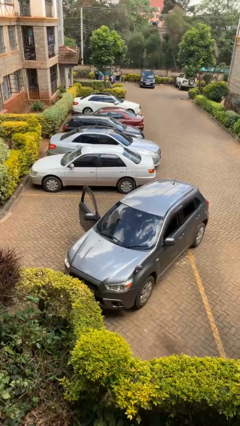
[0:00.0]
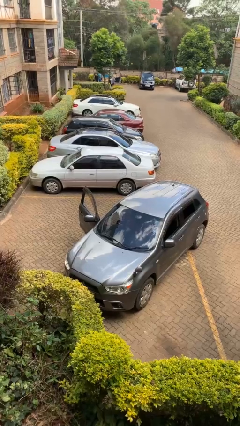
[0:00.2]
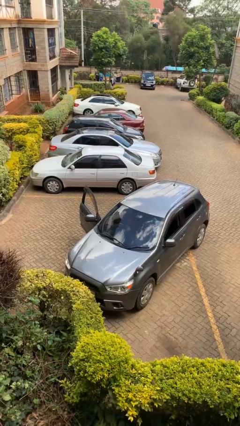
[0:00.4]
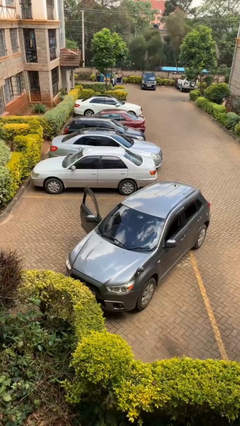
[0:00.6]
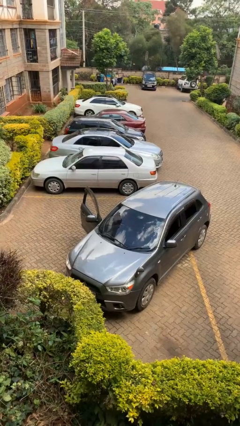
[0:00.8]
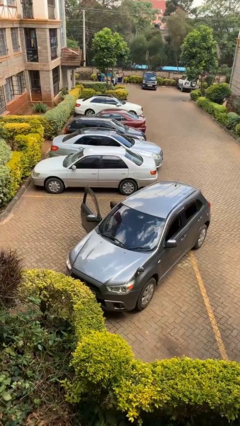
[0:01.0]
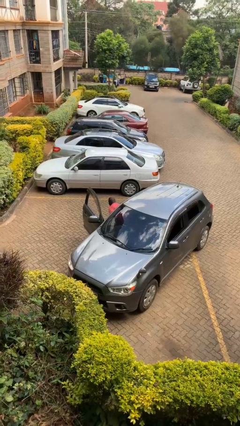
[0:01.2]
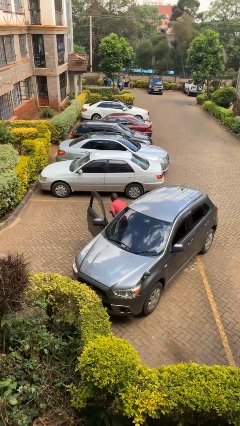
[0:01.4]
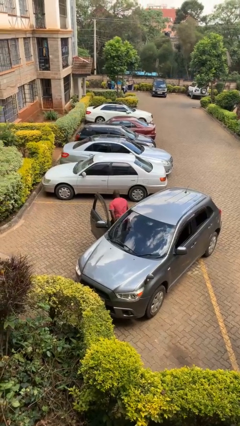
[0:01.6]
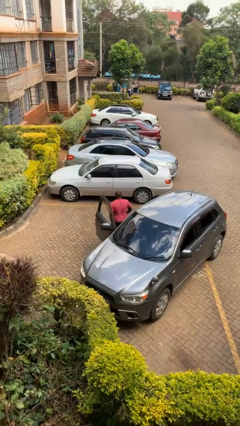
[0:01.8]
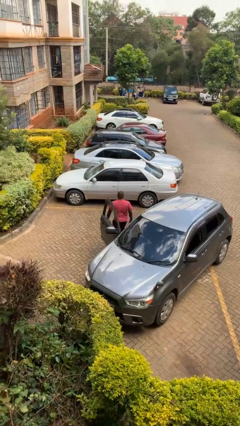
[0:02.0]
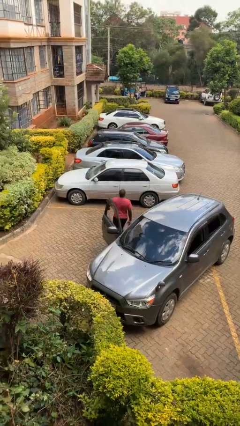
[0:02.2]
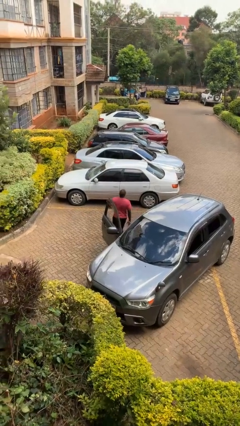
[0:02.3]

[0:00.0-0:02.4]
person exits car

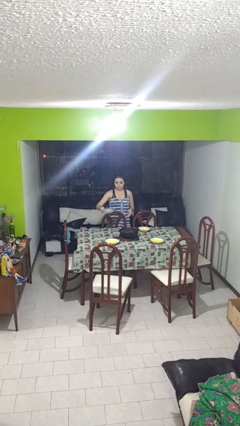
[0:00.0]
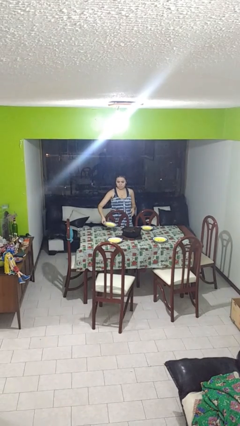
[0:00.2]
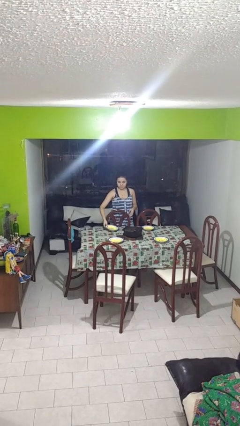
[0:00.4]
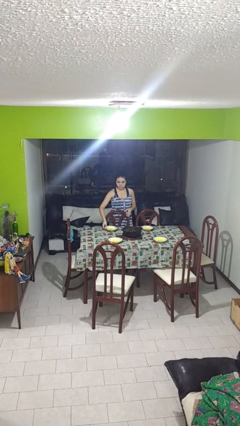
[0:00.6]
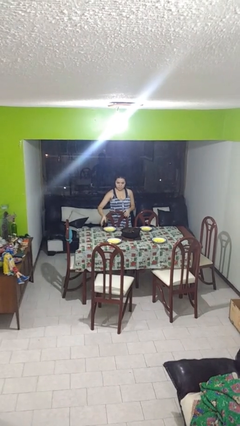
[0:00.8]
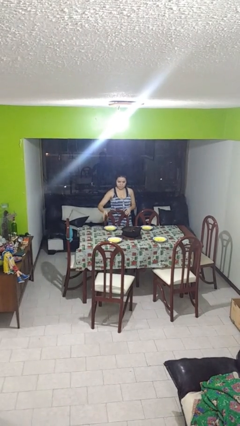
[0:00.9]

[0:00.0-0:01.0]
person sets table

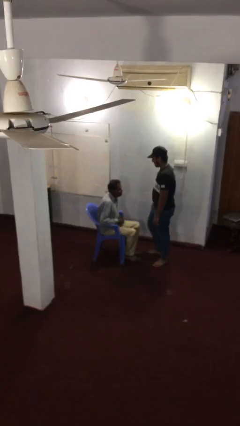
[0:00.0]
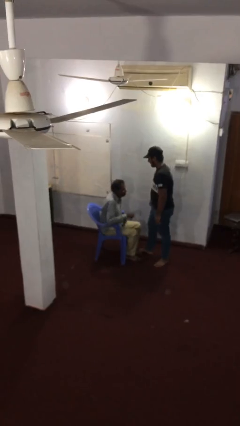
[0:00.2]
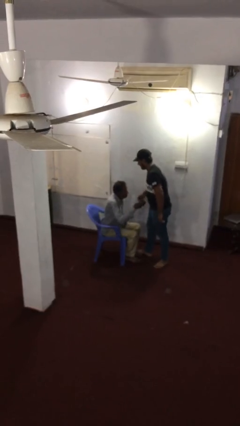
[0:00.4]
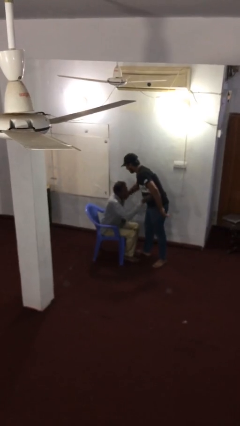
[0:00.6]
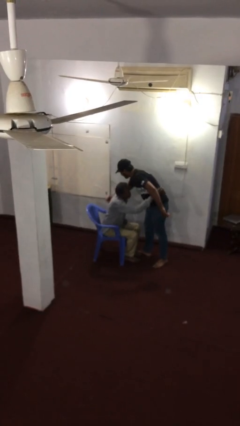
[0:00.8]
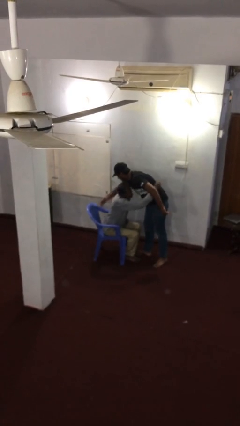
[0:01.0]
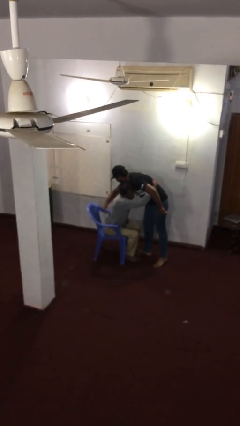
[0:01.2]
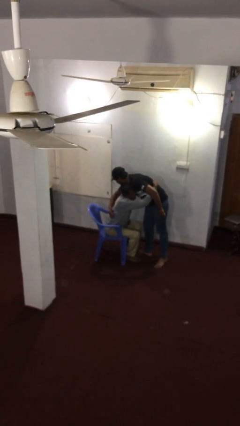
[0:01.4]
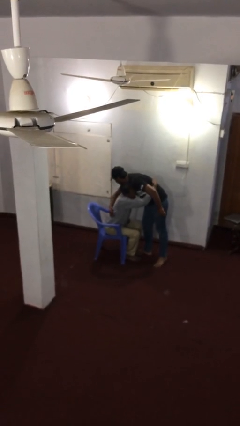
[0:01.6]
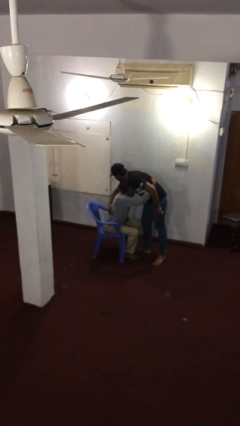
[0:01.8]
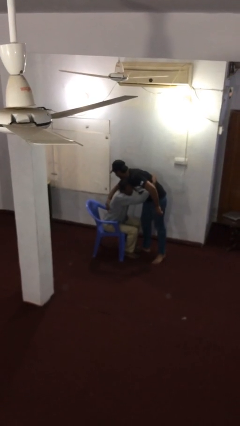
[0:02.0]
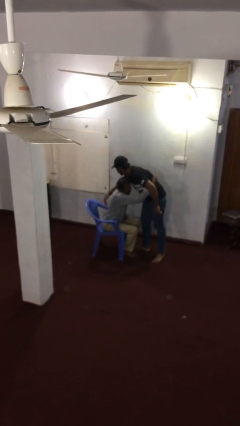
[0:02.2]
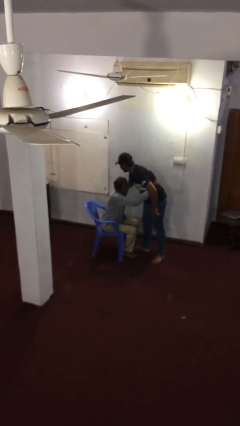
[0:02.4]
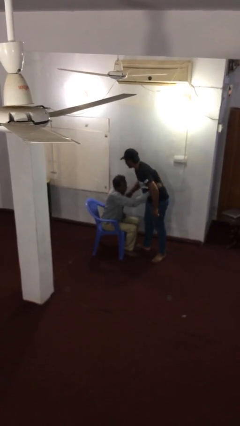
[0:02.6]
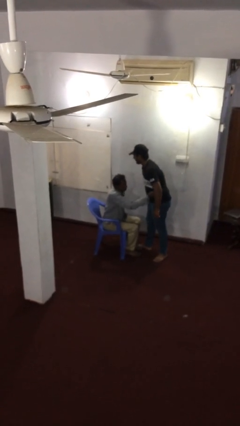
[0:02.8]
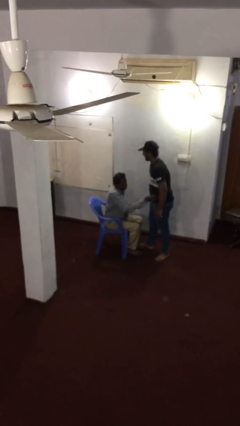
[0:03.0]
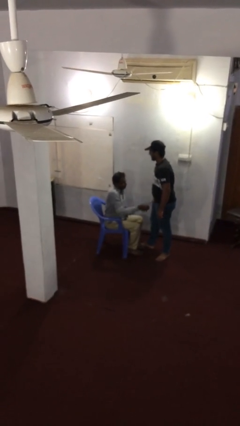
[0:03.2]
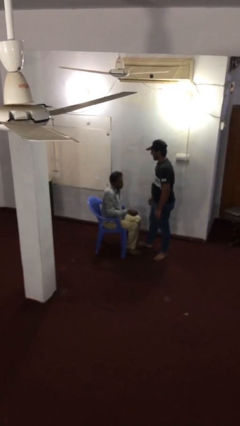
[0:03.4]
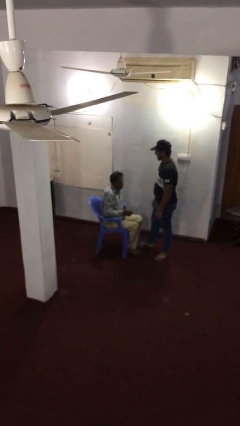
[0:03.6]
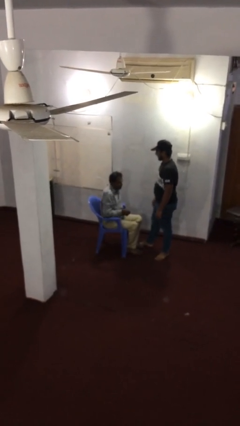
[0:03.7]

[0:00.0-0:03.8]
person embraces person

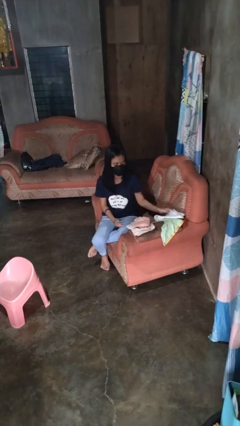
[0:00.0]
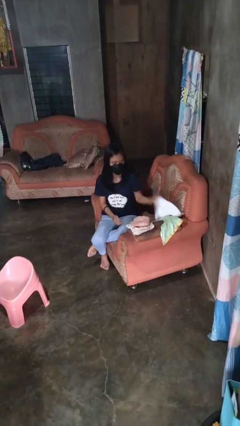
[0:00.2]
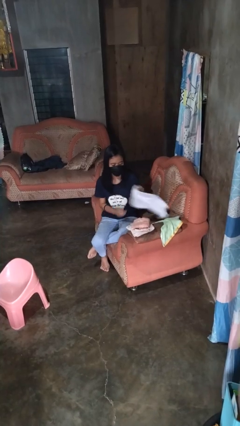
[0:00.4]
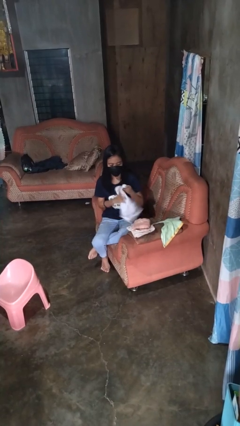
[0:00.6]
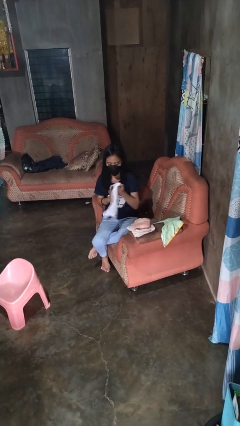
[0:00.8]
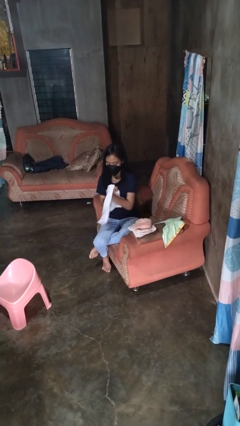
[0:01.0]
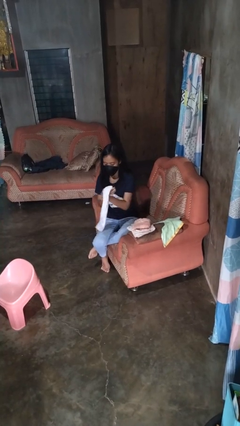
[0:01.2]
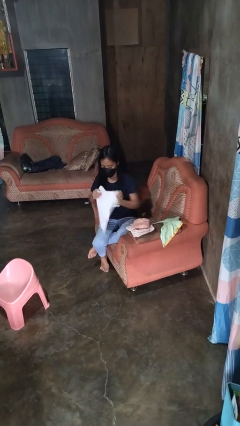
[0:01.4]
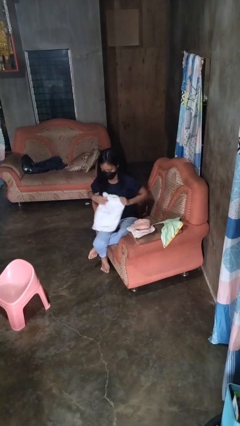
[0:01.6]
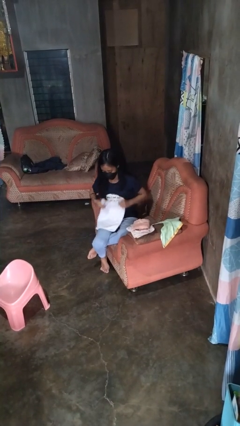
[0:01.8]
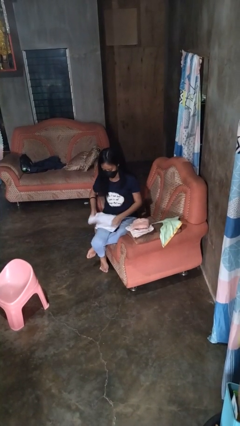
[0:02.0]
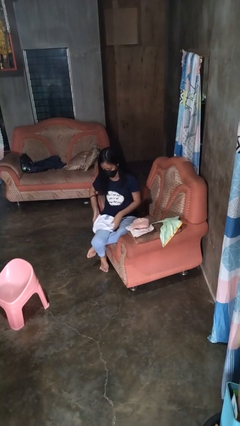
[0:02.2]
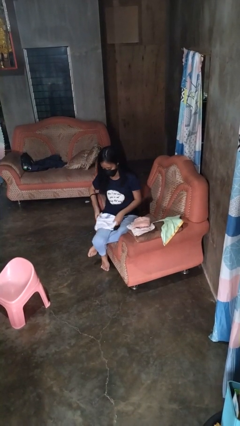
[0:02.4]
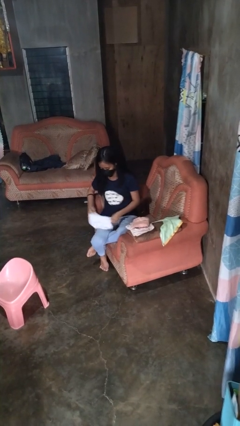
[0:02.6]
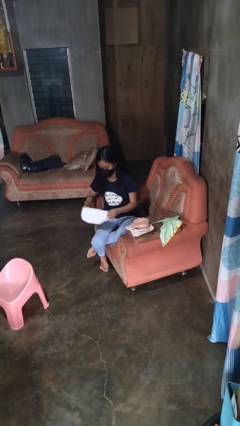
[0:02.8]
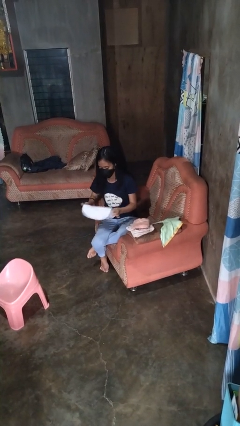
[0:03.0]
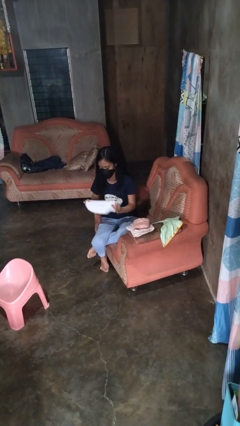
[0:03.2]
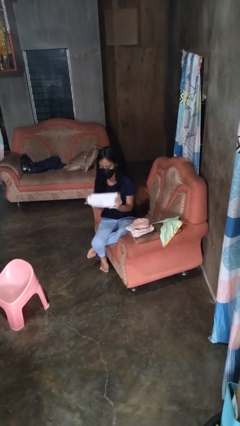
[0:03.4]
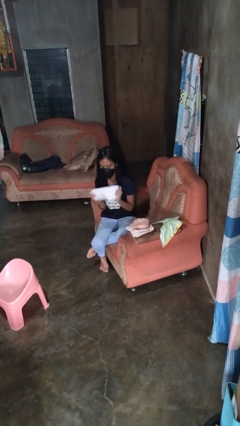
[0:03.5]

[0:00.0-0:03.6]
person folds towel

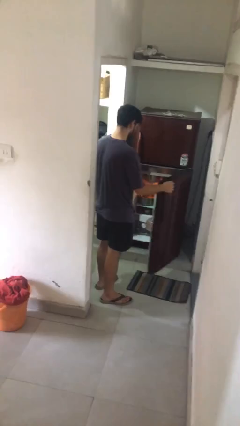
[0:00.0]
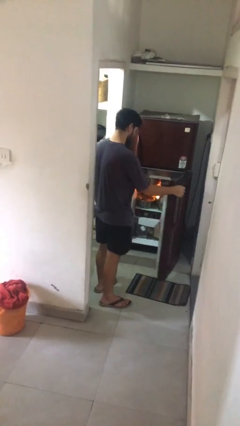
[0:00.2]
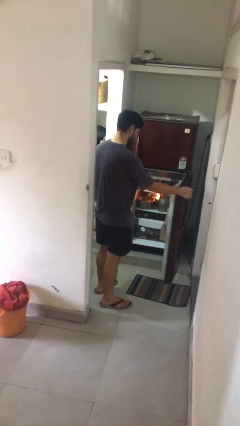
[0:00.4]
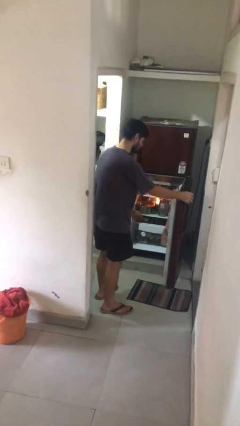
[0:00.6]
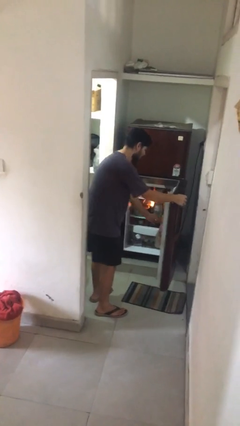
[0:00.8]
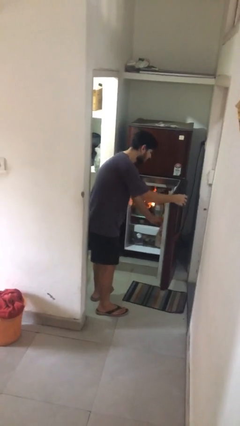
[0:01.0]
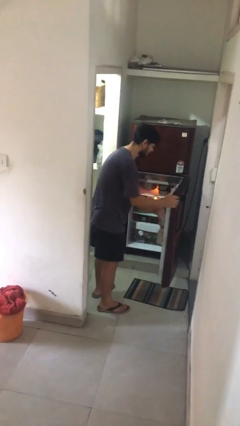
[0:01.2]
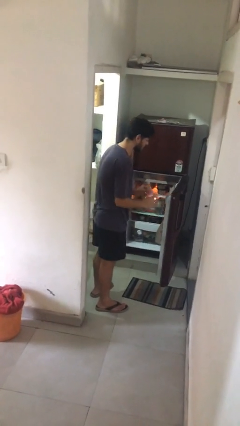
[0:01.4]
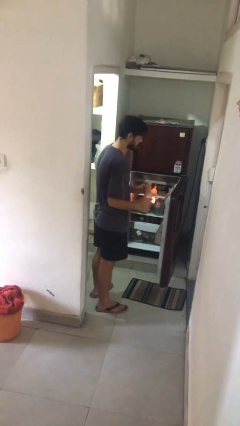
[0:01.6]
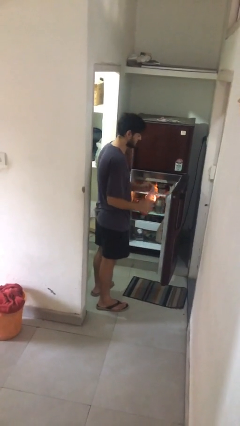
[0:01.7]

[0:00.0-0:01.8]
person takes object from refrigerator

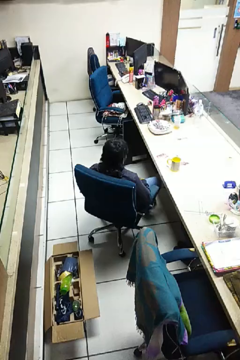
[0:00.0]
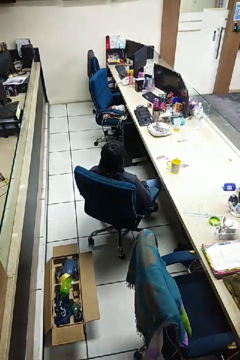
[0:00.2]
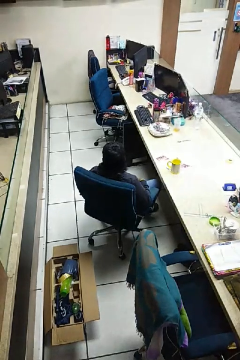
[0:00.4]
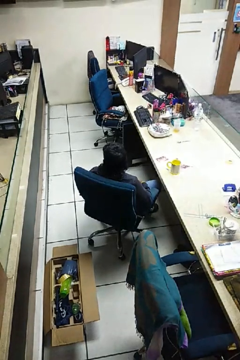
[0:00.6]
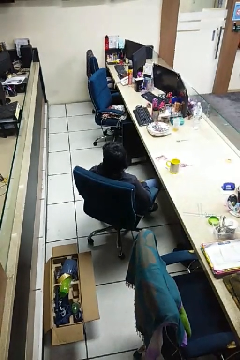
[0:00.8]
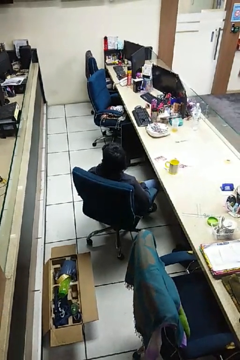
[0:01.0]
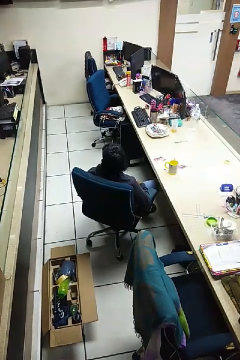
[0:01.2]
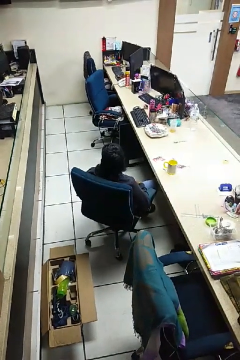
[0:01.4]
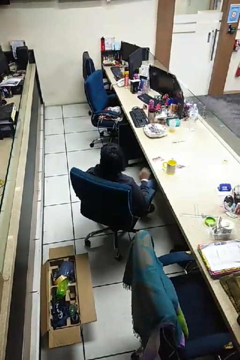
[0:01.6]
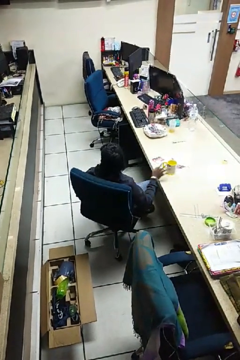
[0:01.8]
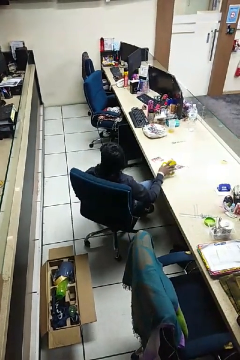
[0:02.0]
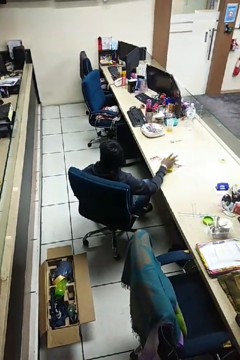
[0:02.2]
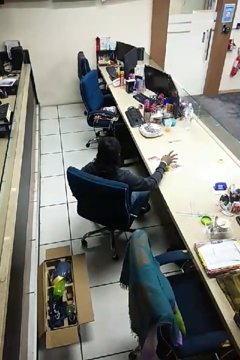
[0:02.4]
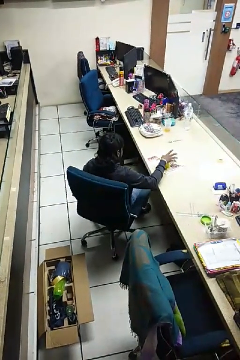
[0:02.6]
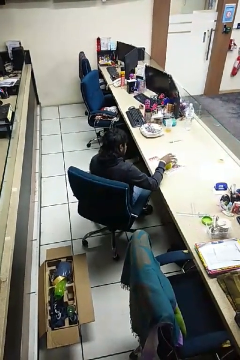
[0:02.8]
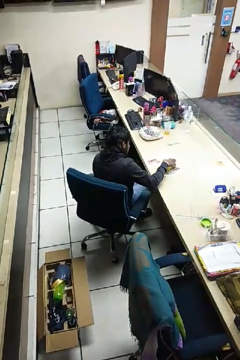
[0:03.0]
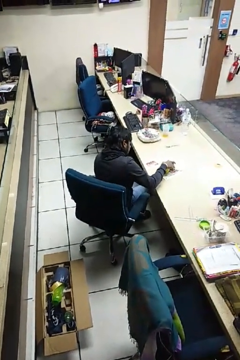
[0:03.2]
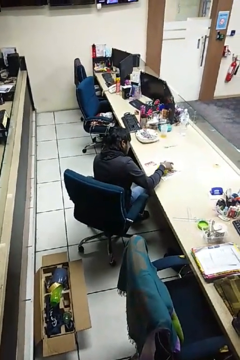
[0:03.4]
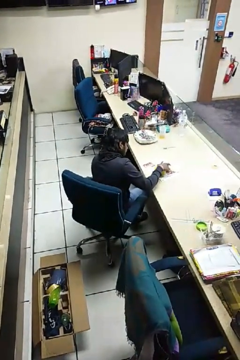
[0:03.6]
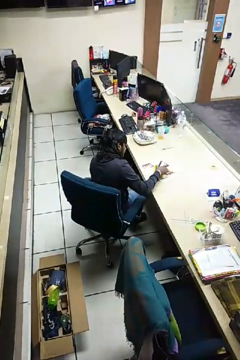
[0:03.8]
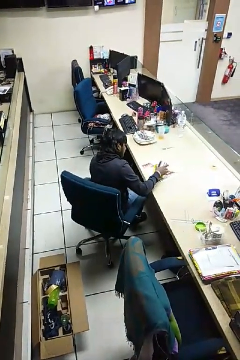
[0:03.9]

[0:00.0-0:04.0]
person spills on table

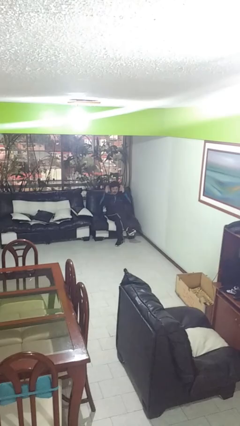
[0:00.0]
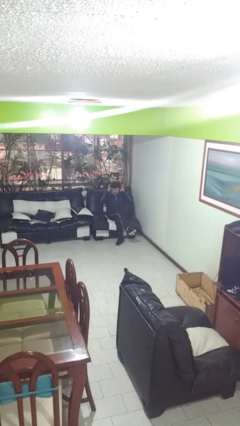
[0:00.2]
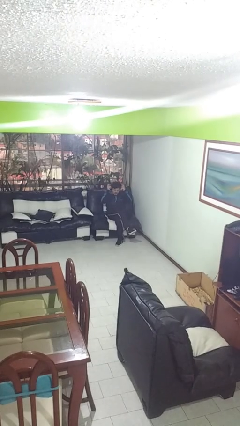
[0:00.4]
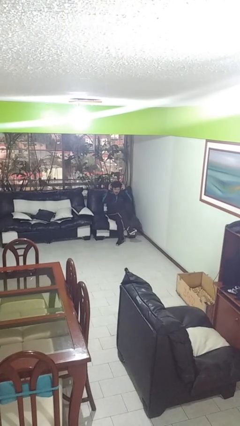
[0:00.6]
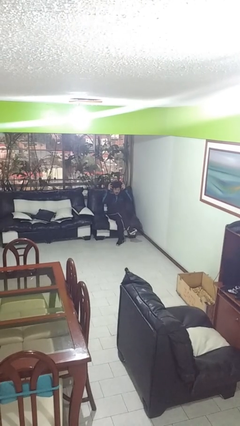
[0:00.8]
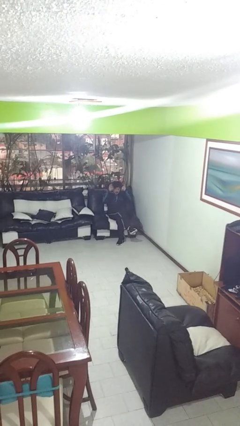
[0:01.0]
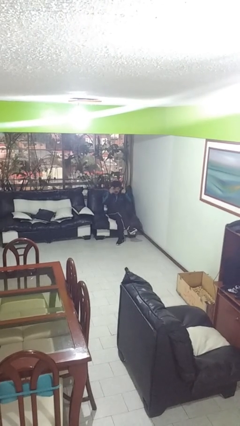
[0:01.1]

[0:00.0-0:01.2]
person takes off headphones
